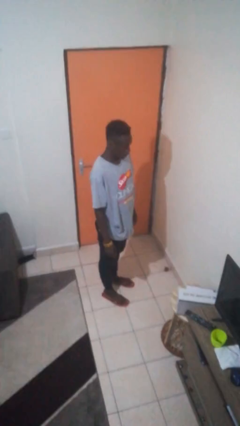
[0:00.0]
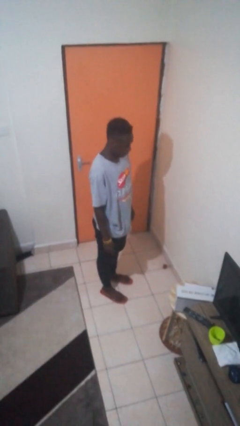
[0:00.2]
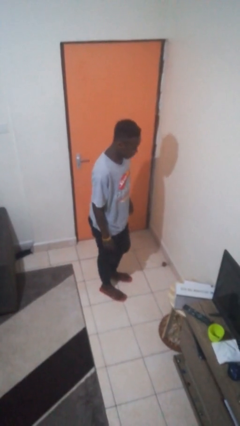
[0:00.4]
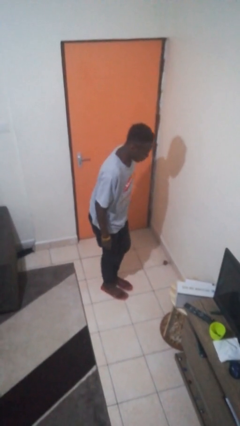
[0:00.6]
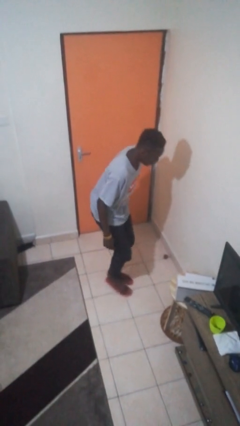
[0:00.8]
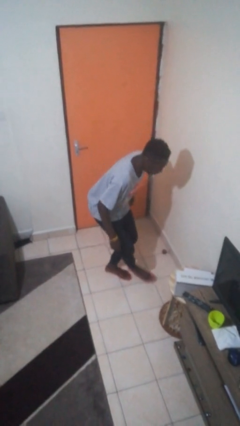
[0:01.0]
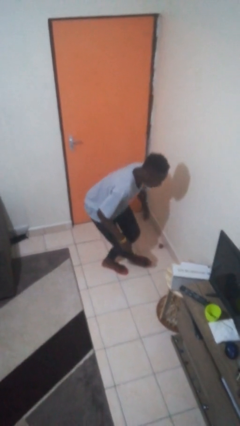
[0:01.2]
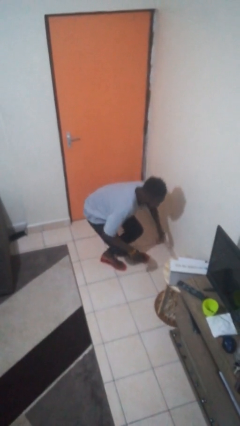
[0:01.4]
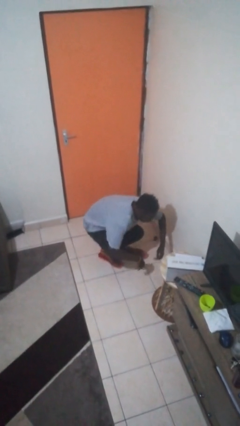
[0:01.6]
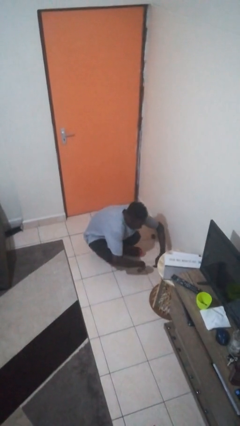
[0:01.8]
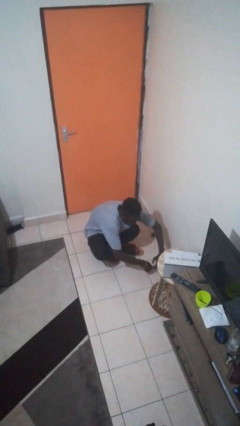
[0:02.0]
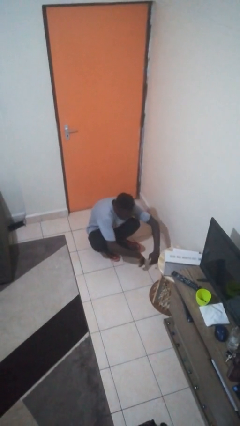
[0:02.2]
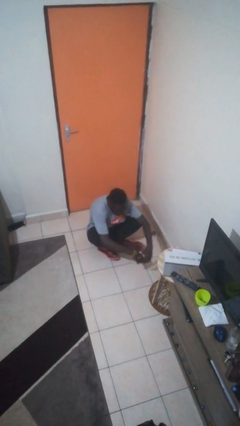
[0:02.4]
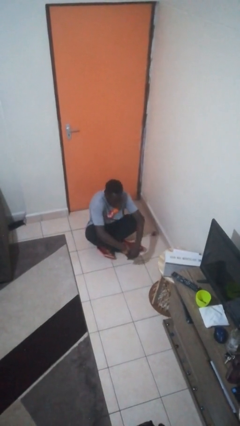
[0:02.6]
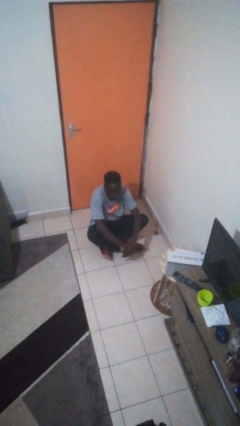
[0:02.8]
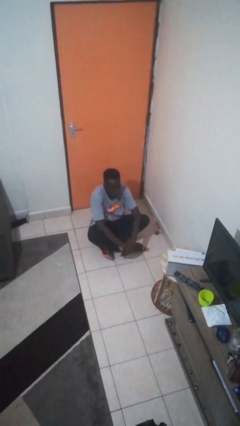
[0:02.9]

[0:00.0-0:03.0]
person sits crisscross

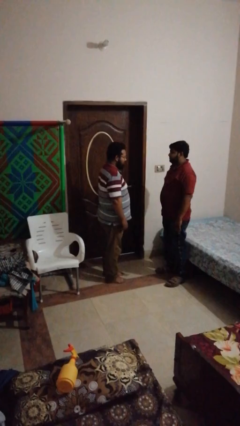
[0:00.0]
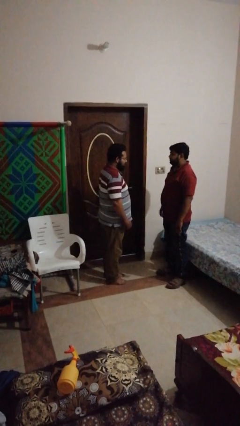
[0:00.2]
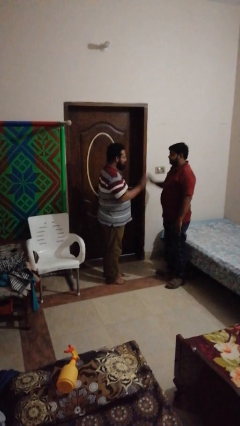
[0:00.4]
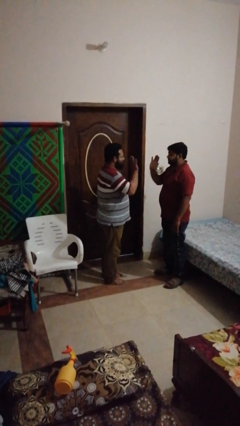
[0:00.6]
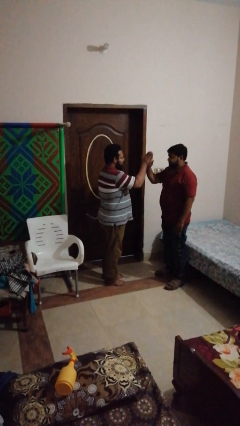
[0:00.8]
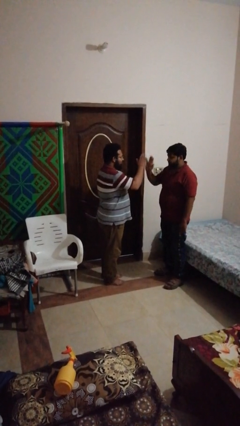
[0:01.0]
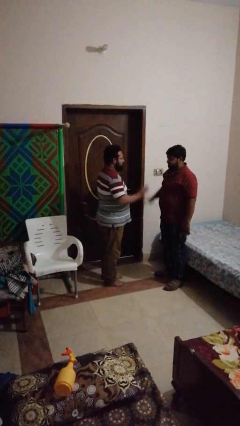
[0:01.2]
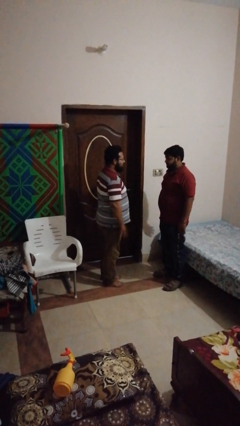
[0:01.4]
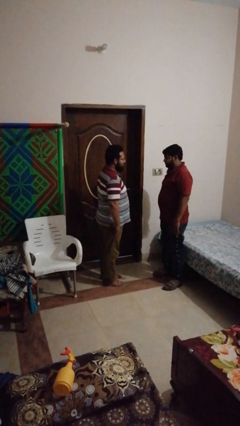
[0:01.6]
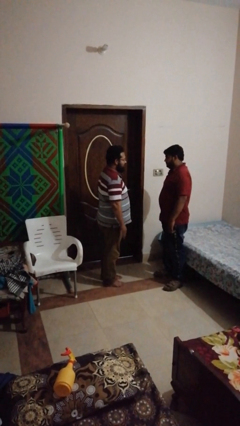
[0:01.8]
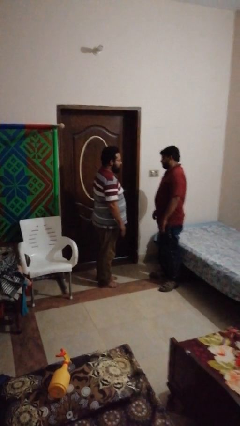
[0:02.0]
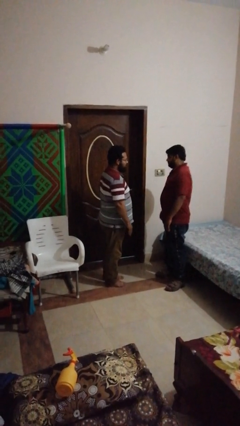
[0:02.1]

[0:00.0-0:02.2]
person highfives hand

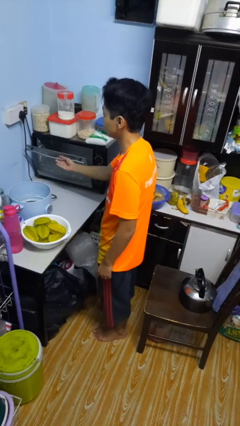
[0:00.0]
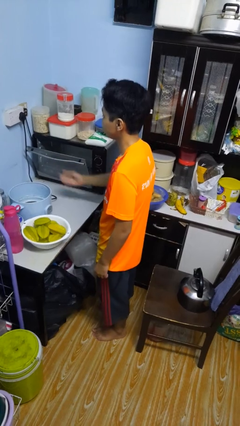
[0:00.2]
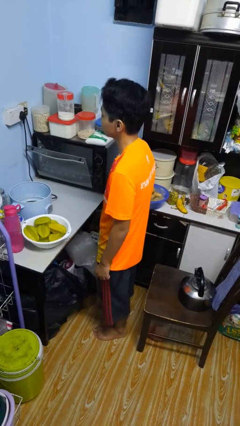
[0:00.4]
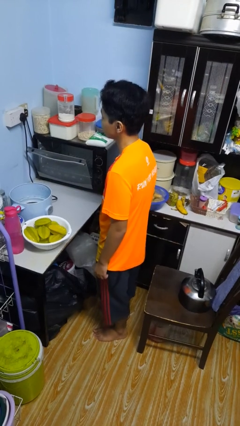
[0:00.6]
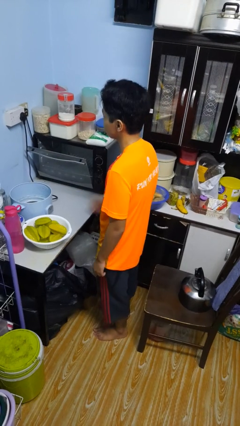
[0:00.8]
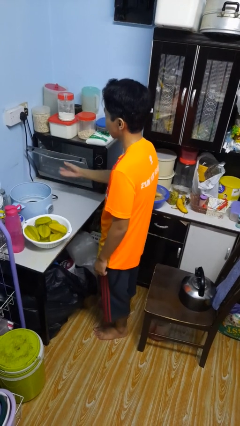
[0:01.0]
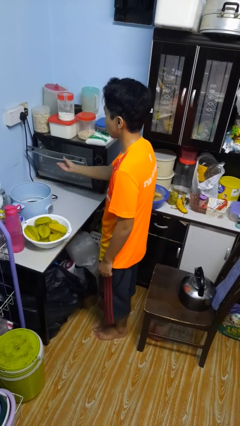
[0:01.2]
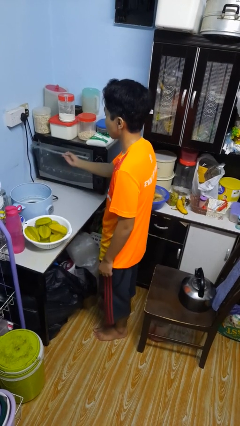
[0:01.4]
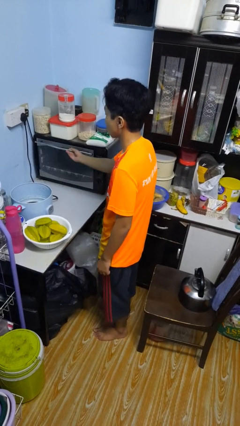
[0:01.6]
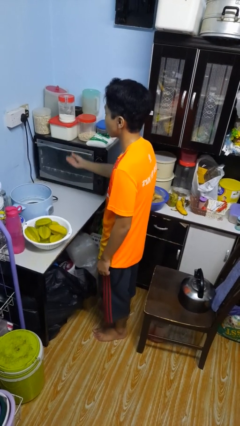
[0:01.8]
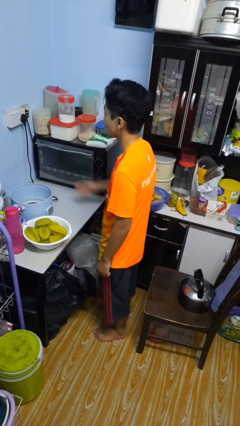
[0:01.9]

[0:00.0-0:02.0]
person closes microwave

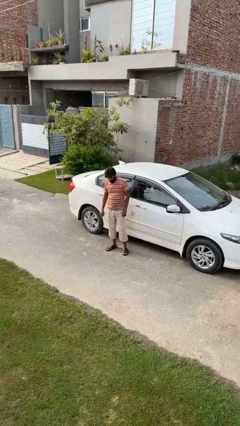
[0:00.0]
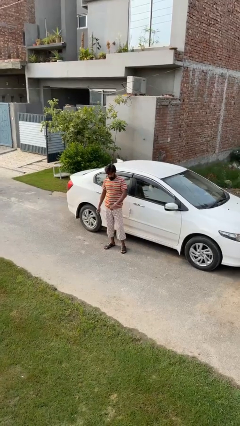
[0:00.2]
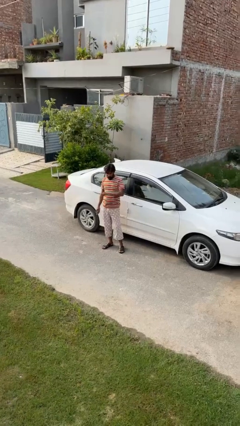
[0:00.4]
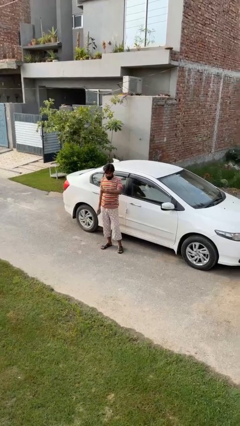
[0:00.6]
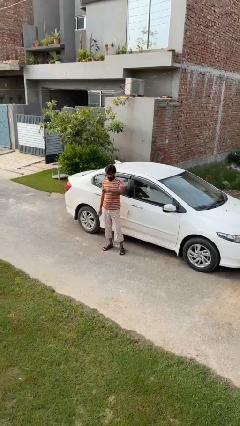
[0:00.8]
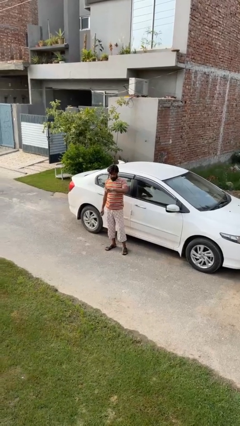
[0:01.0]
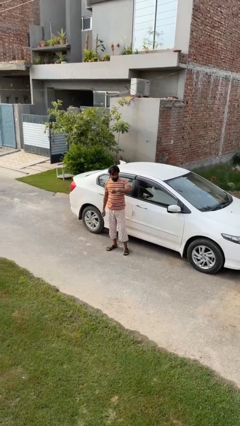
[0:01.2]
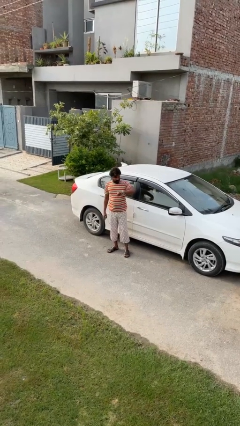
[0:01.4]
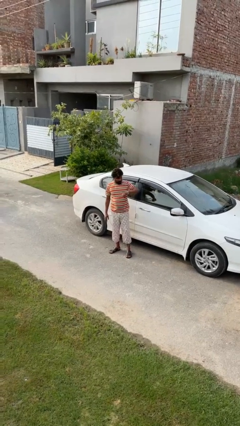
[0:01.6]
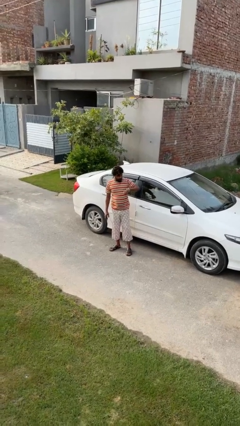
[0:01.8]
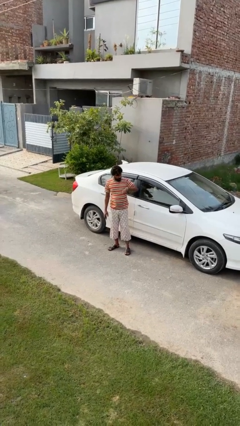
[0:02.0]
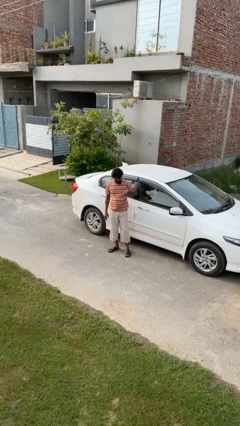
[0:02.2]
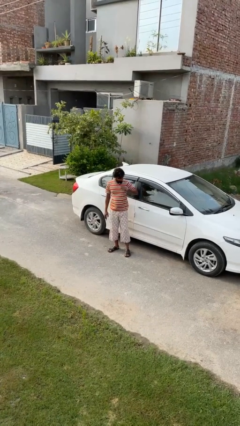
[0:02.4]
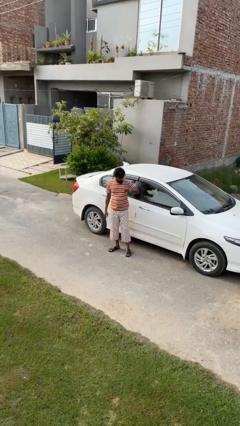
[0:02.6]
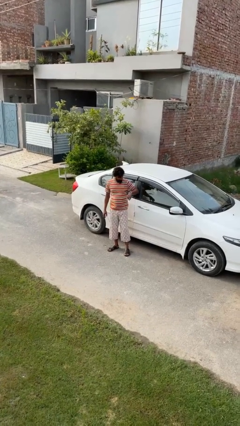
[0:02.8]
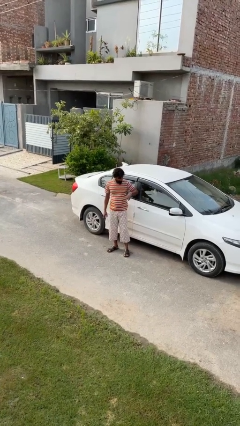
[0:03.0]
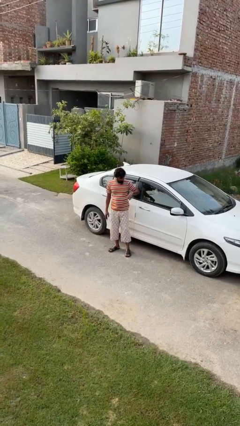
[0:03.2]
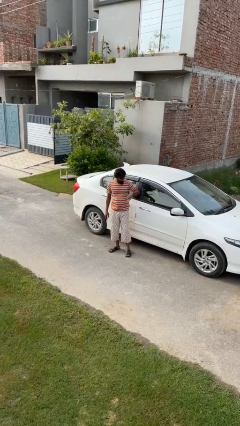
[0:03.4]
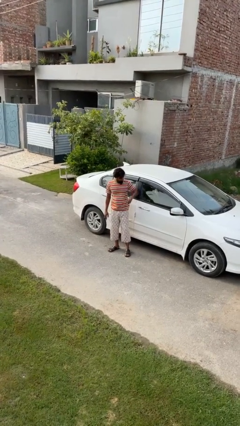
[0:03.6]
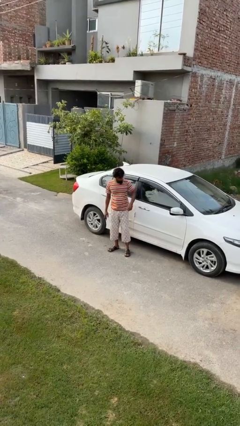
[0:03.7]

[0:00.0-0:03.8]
person looks at wristwatch

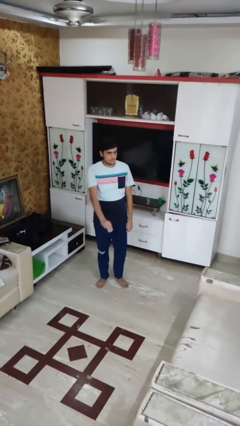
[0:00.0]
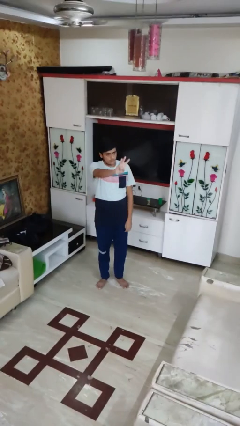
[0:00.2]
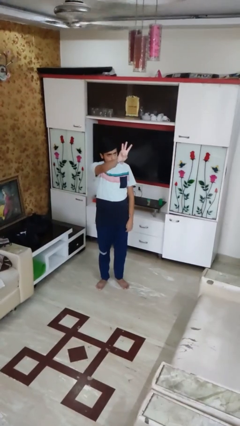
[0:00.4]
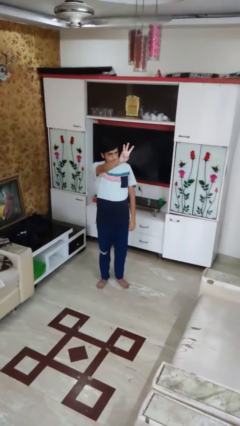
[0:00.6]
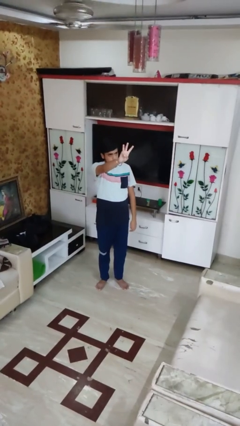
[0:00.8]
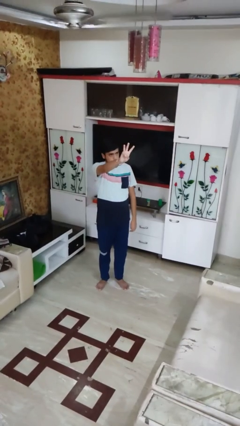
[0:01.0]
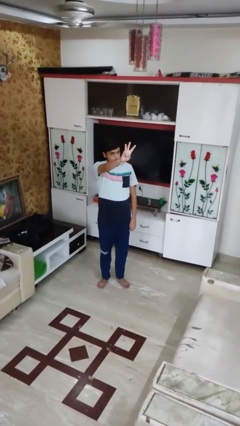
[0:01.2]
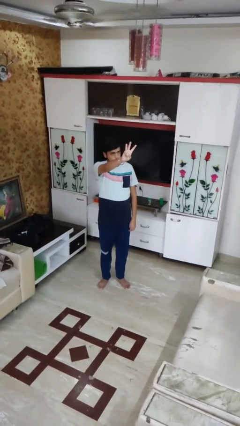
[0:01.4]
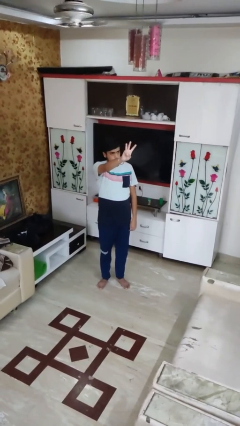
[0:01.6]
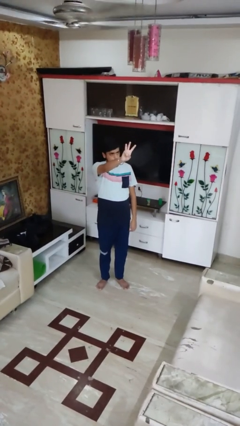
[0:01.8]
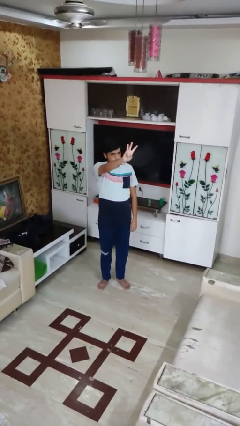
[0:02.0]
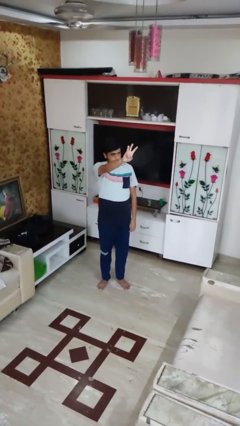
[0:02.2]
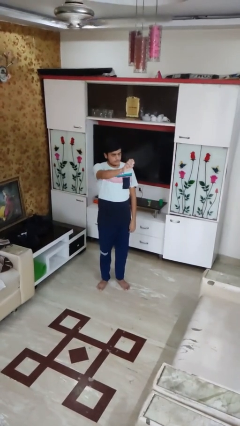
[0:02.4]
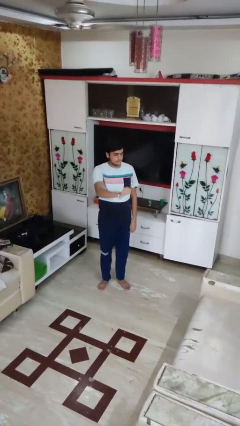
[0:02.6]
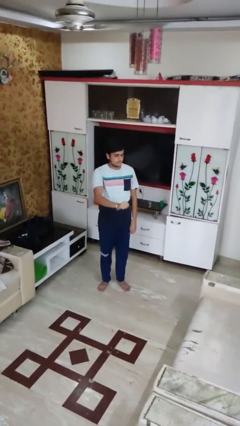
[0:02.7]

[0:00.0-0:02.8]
person gestures number three

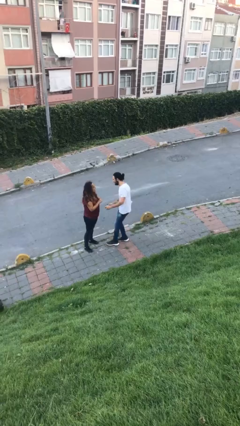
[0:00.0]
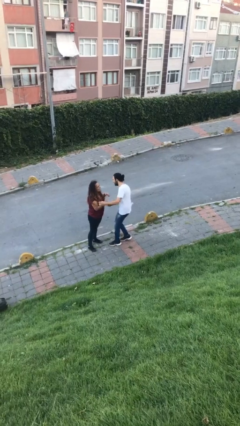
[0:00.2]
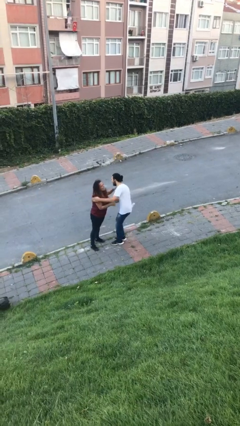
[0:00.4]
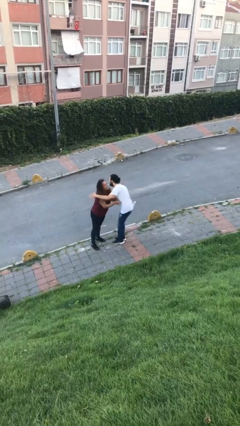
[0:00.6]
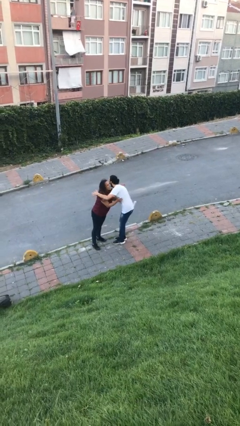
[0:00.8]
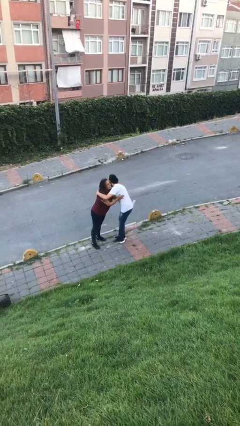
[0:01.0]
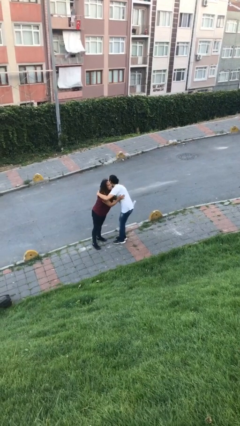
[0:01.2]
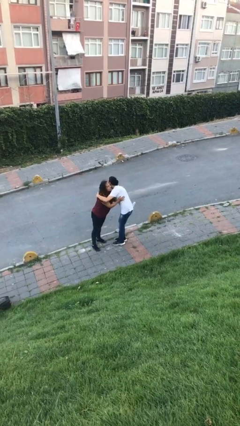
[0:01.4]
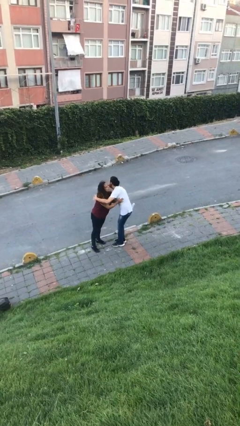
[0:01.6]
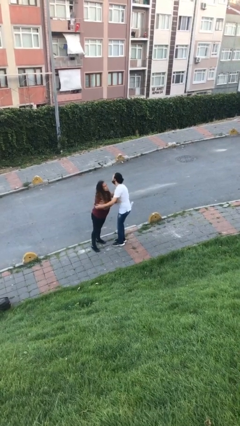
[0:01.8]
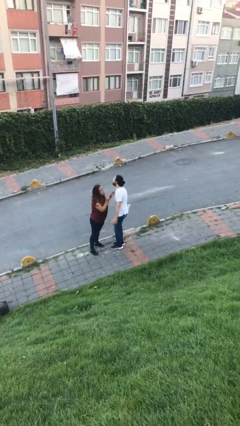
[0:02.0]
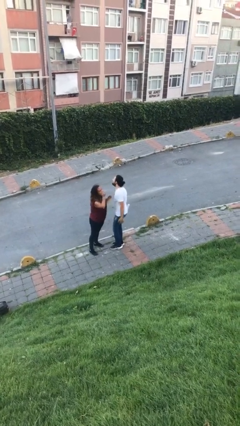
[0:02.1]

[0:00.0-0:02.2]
person embraces person

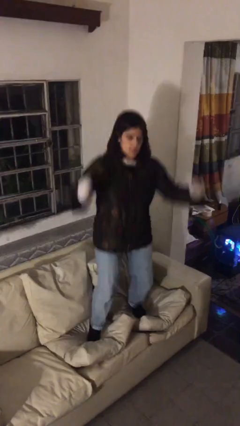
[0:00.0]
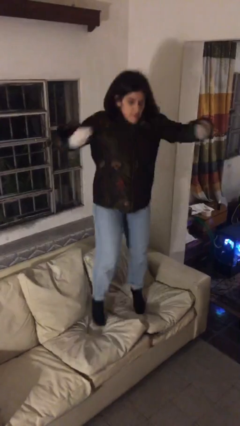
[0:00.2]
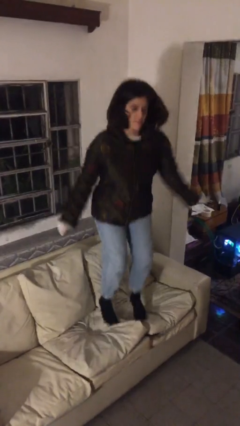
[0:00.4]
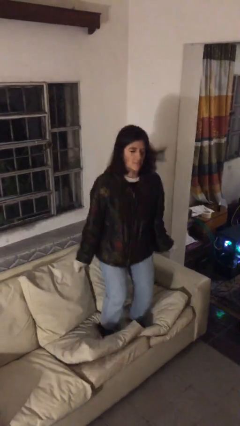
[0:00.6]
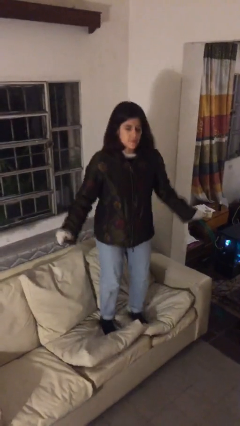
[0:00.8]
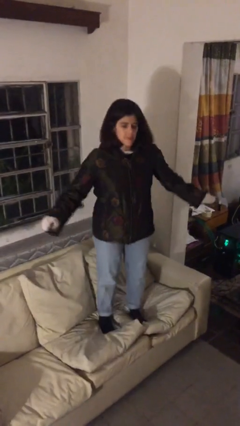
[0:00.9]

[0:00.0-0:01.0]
person jumps on couch
